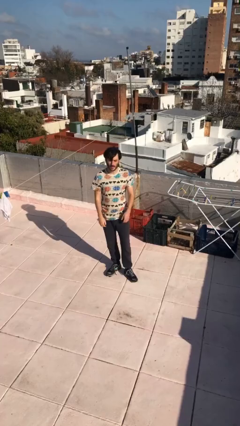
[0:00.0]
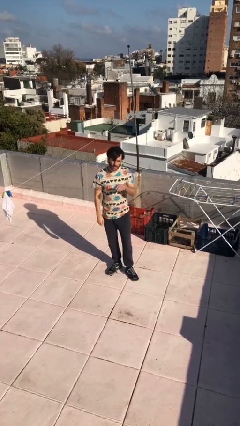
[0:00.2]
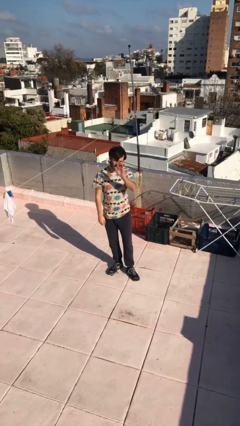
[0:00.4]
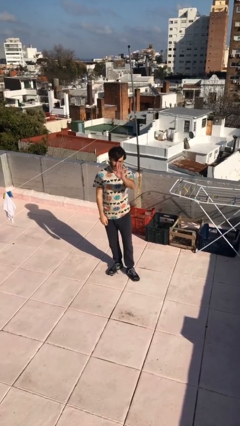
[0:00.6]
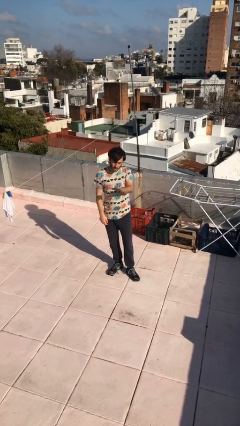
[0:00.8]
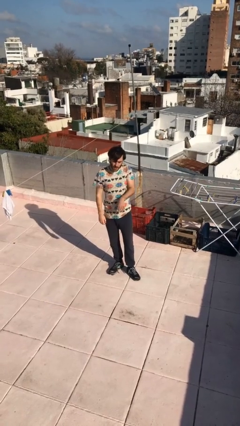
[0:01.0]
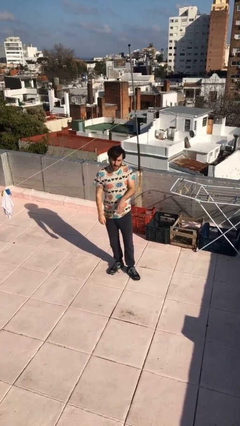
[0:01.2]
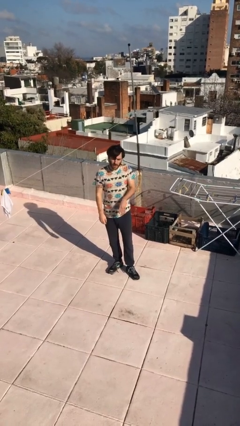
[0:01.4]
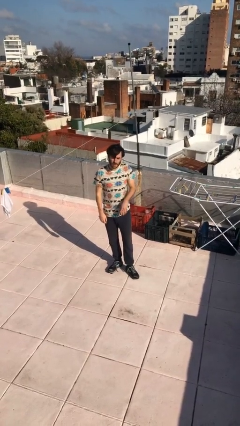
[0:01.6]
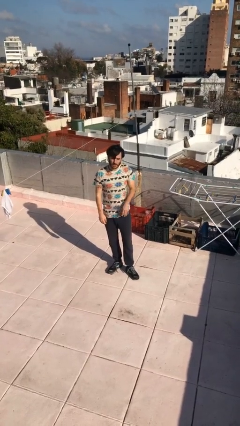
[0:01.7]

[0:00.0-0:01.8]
person gestures swipe down

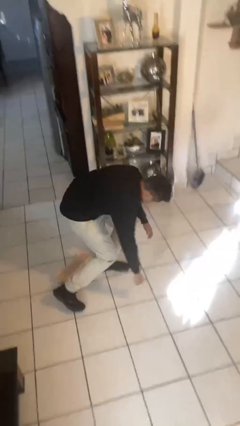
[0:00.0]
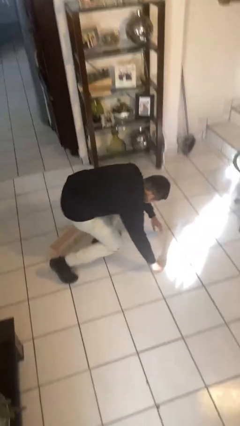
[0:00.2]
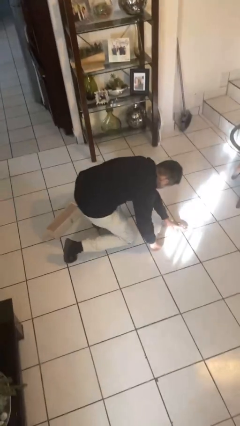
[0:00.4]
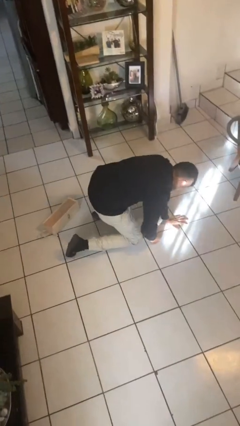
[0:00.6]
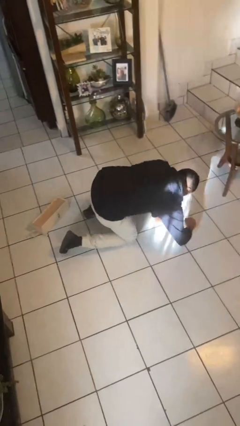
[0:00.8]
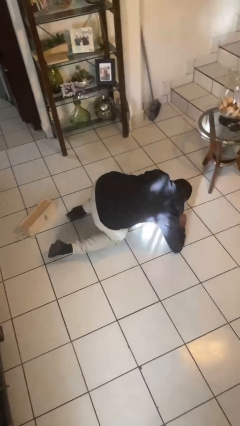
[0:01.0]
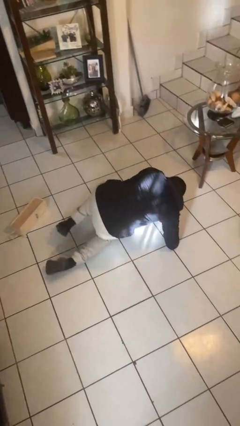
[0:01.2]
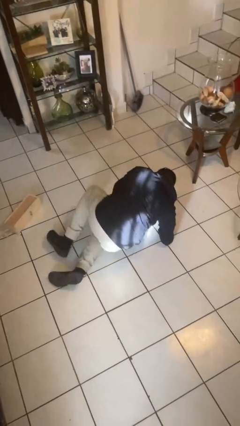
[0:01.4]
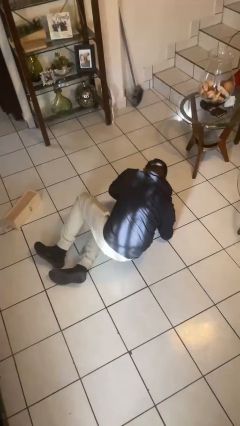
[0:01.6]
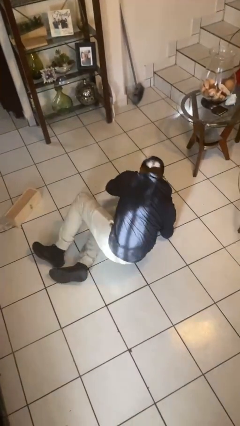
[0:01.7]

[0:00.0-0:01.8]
person lies down on floor

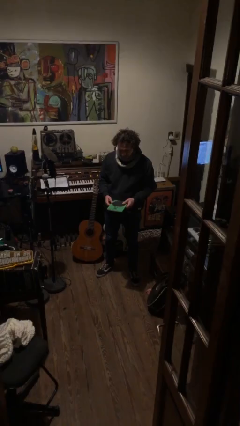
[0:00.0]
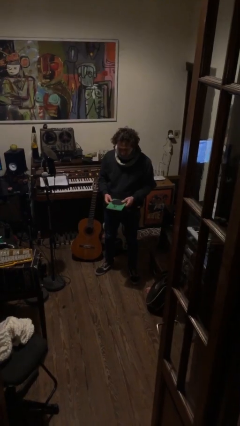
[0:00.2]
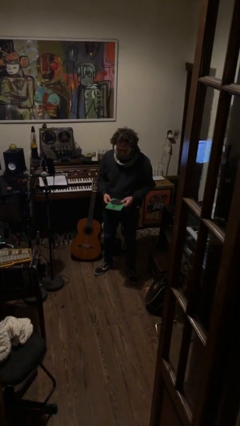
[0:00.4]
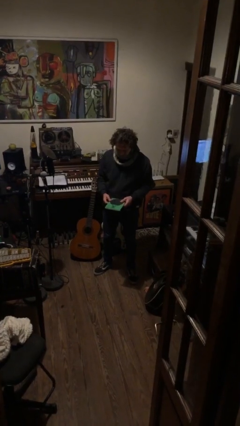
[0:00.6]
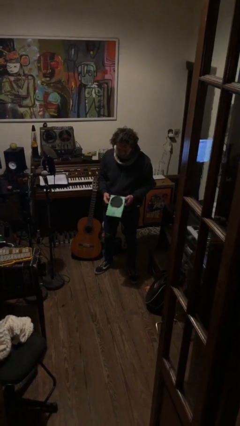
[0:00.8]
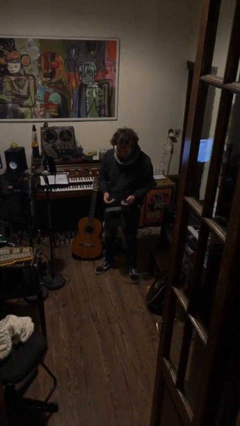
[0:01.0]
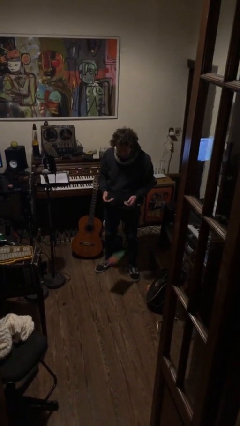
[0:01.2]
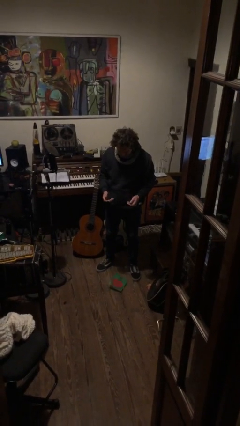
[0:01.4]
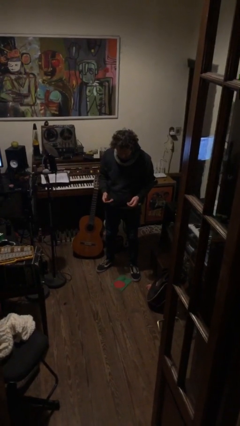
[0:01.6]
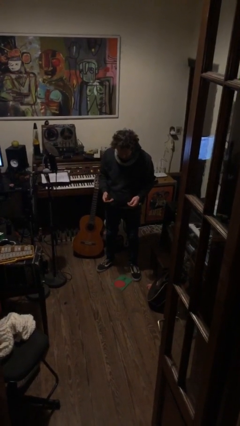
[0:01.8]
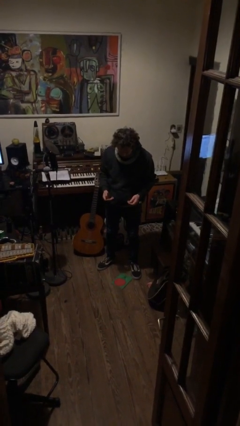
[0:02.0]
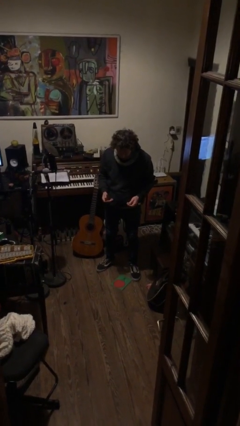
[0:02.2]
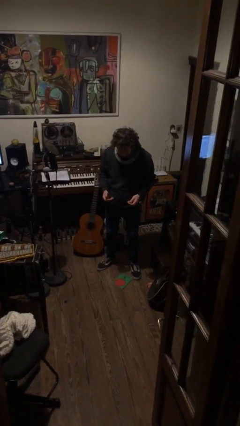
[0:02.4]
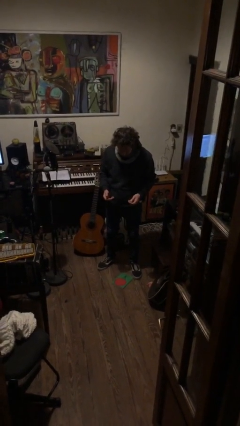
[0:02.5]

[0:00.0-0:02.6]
person drops object

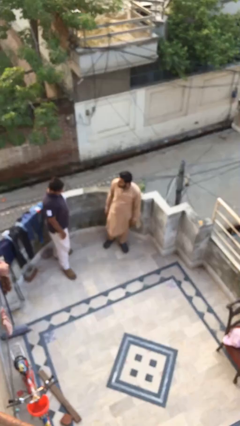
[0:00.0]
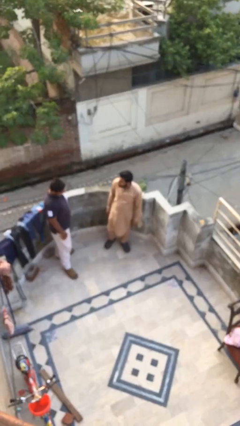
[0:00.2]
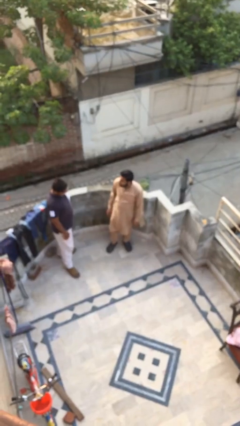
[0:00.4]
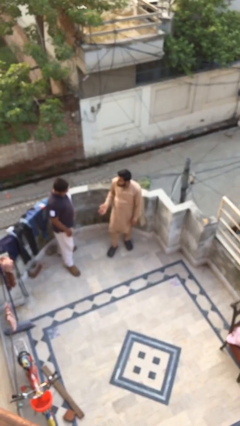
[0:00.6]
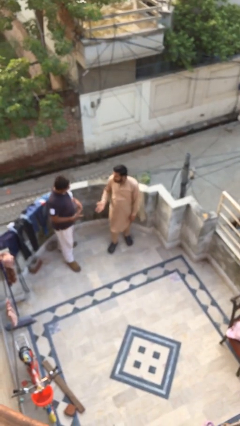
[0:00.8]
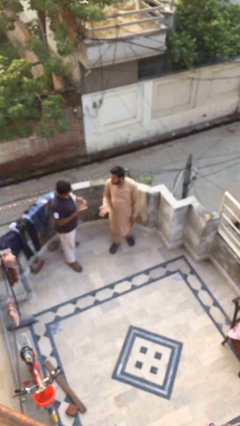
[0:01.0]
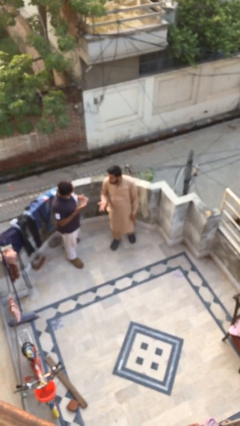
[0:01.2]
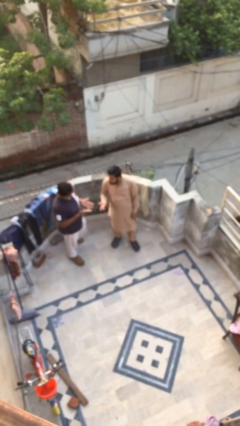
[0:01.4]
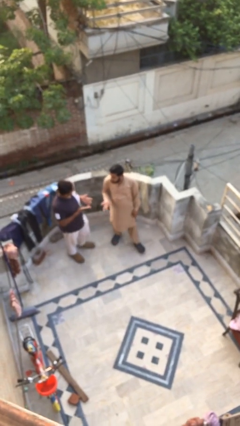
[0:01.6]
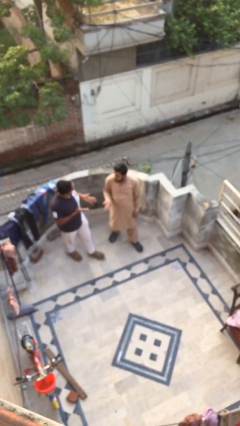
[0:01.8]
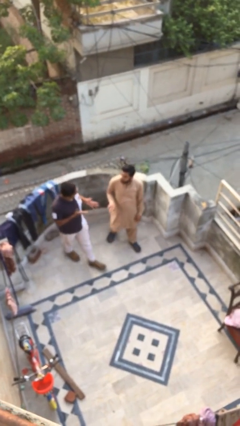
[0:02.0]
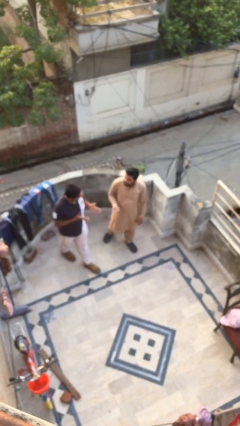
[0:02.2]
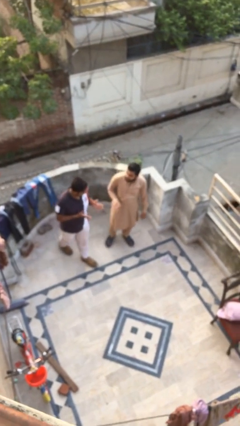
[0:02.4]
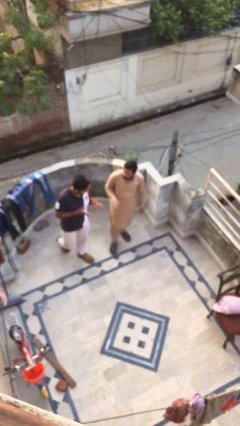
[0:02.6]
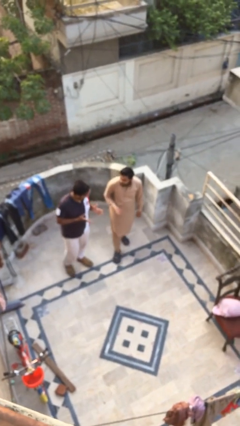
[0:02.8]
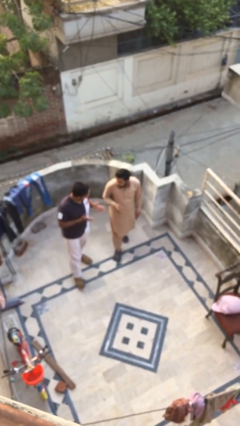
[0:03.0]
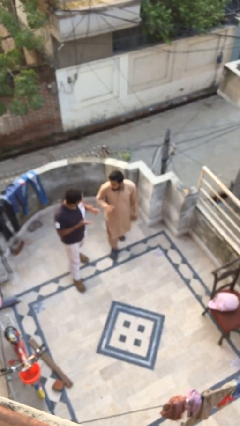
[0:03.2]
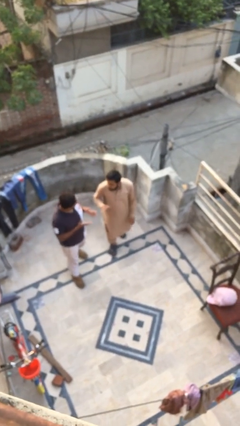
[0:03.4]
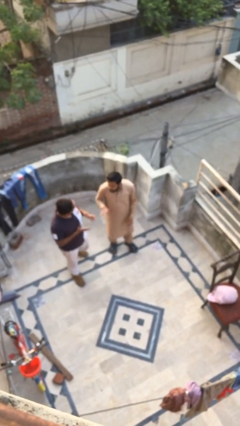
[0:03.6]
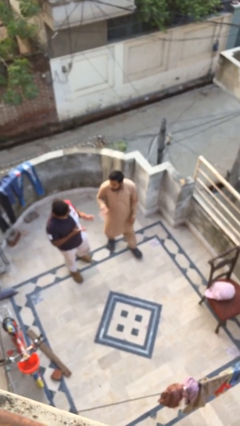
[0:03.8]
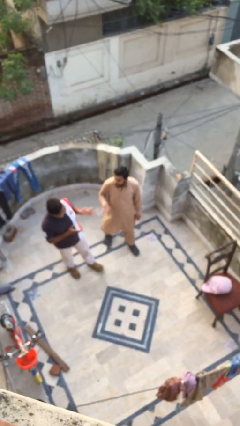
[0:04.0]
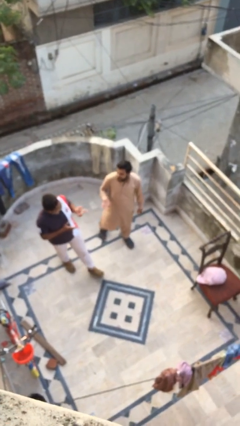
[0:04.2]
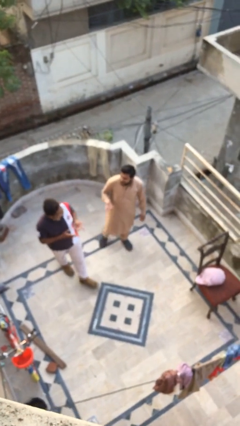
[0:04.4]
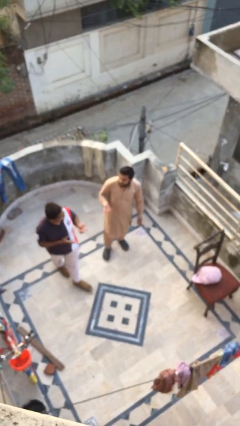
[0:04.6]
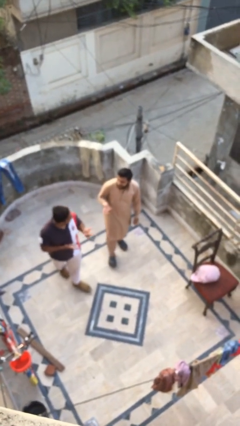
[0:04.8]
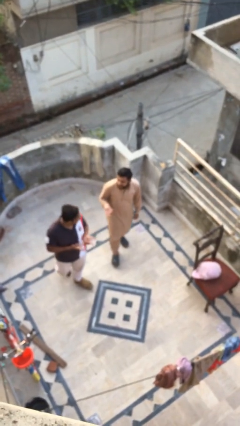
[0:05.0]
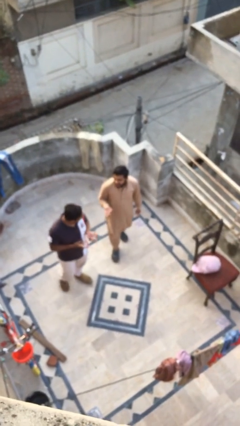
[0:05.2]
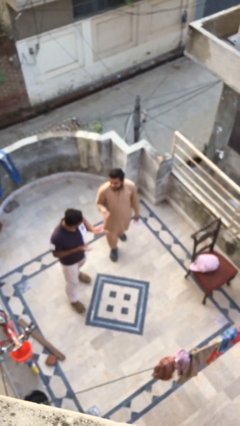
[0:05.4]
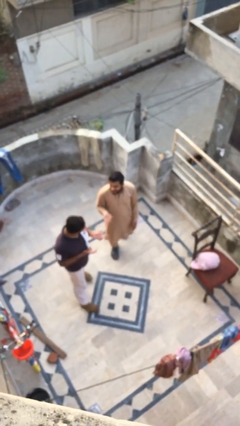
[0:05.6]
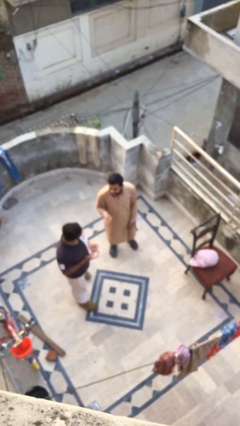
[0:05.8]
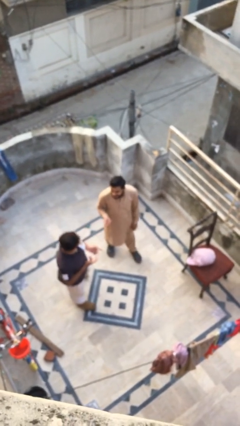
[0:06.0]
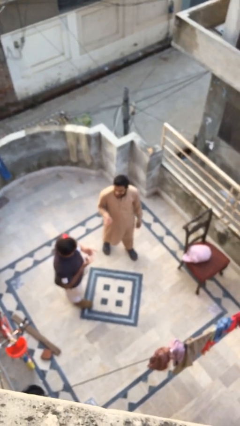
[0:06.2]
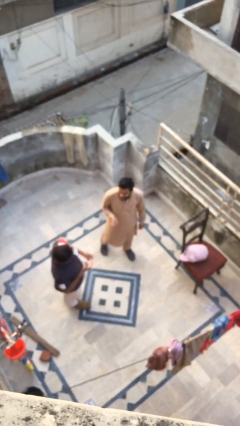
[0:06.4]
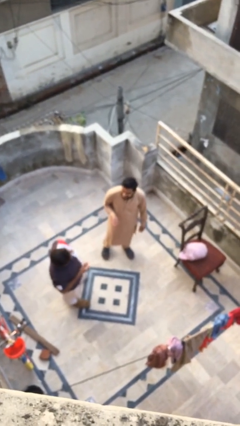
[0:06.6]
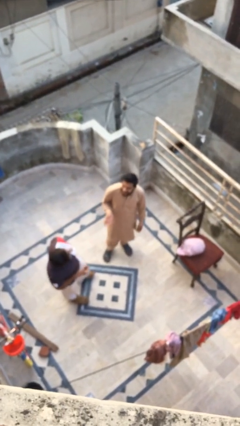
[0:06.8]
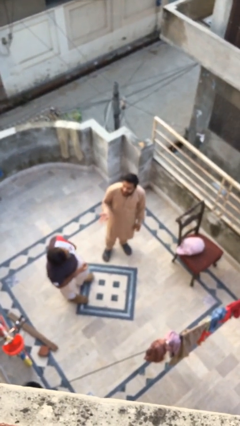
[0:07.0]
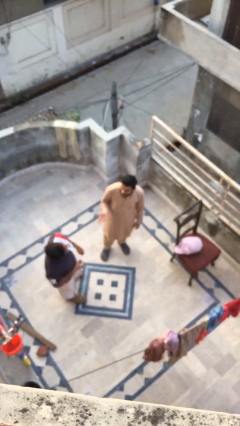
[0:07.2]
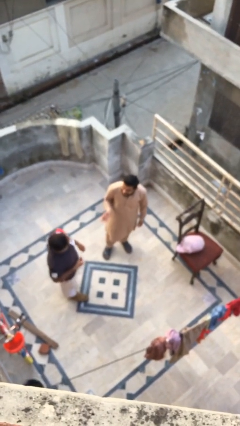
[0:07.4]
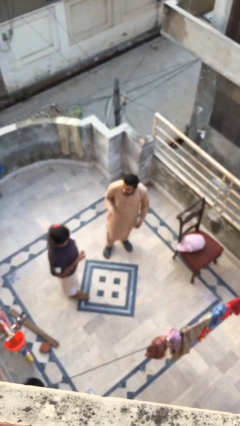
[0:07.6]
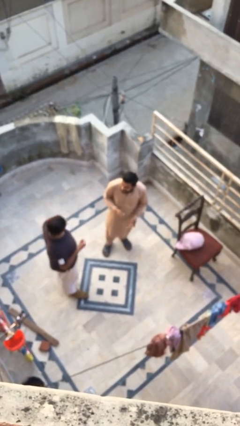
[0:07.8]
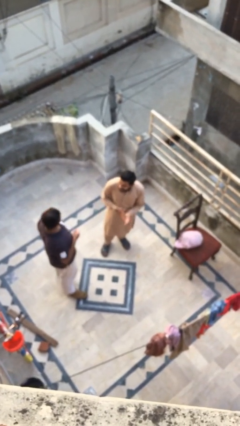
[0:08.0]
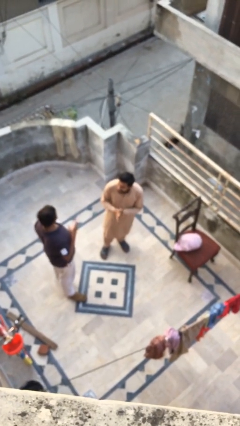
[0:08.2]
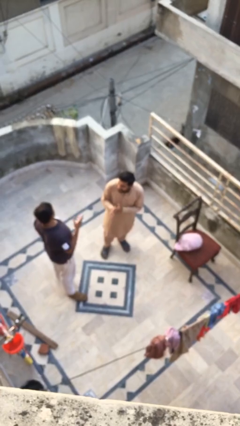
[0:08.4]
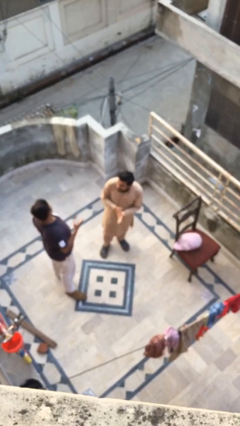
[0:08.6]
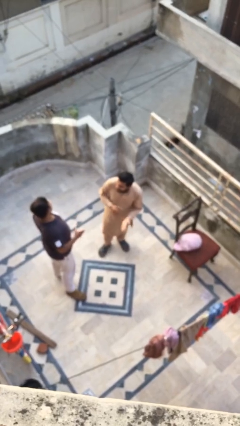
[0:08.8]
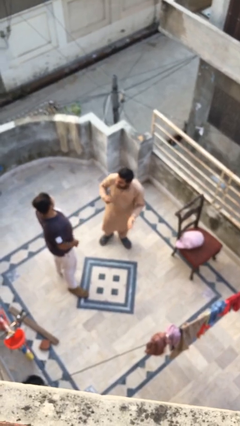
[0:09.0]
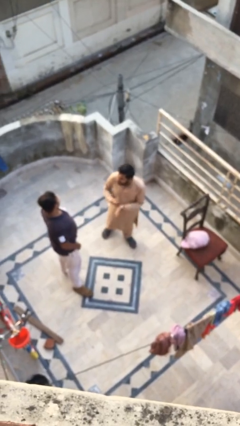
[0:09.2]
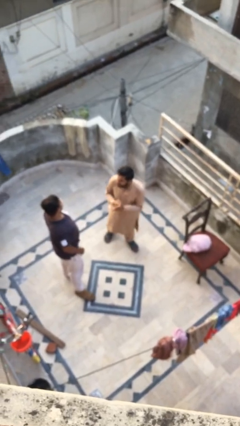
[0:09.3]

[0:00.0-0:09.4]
person talks to person

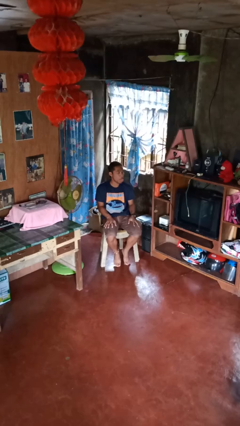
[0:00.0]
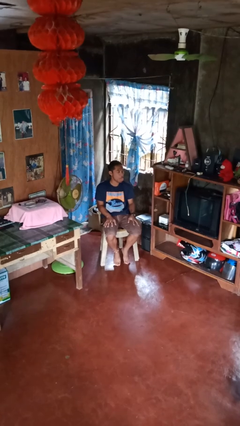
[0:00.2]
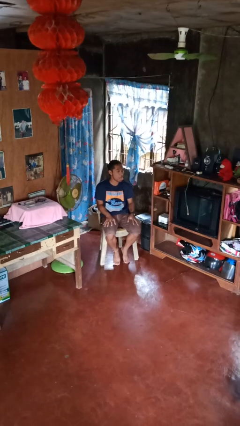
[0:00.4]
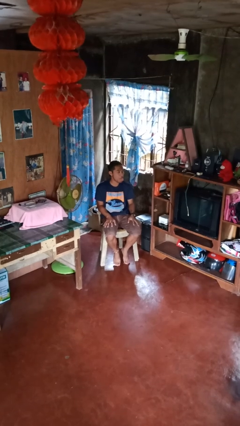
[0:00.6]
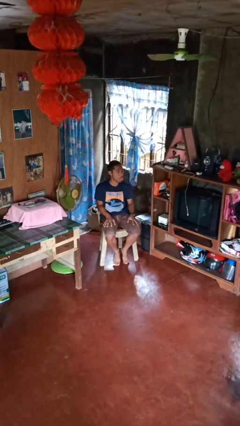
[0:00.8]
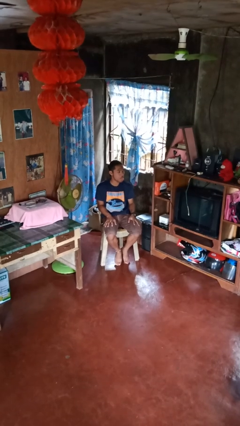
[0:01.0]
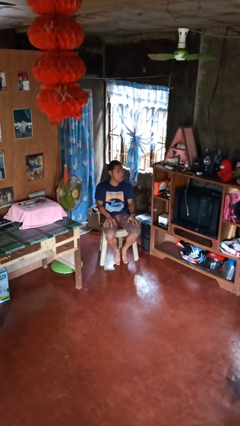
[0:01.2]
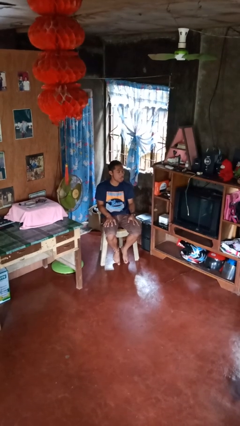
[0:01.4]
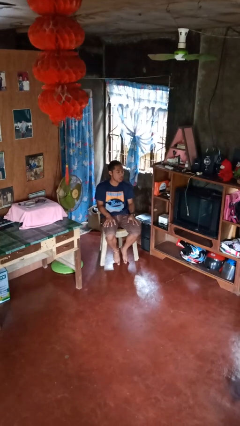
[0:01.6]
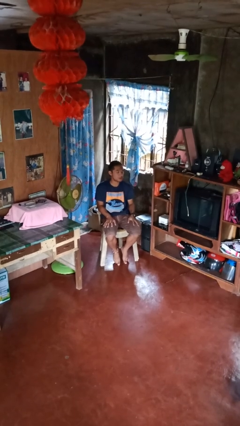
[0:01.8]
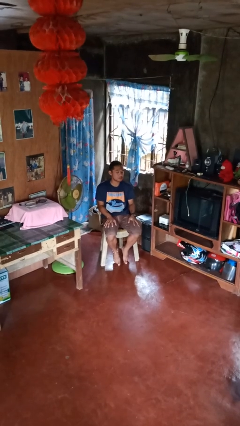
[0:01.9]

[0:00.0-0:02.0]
person sticks out tongue

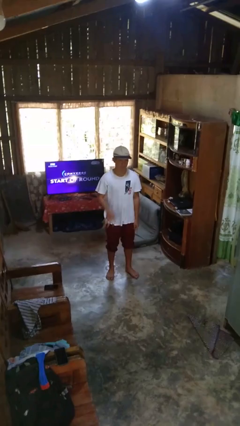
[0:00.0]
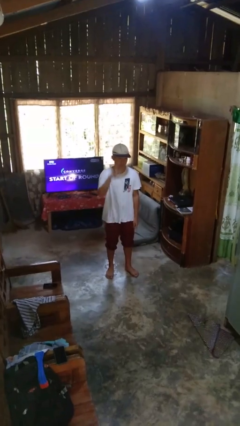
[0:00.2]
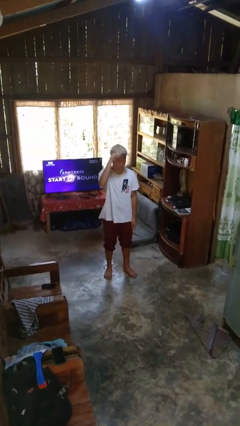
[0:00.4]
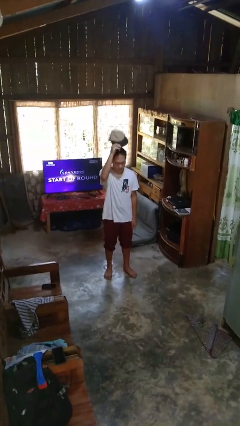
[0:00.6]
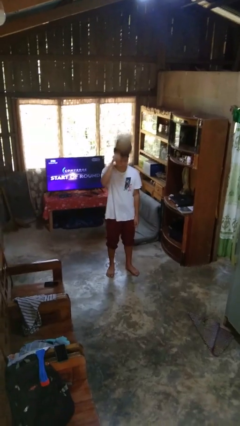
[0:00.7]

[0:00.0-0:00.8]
person takes off hat
